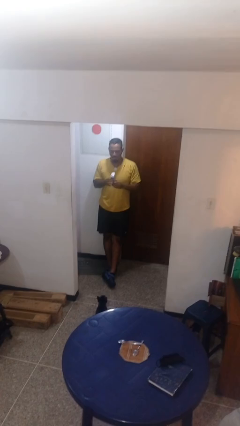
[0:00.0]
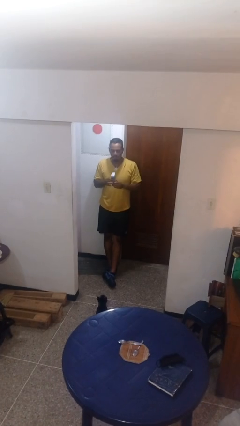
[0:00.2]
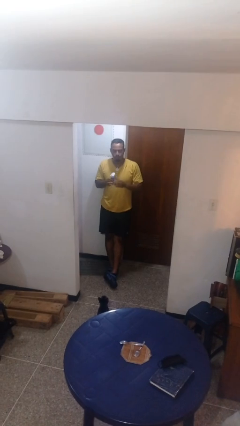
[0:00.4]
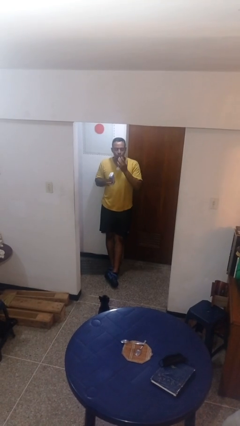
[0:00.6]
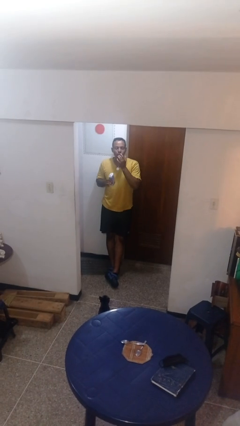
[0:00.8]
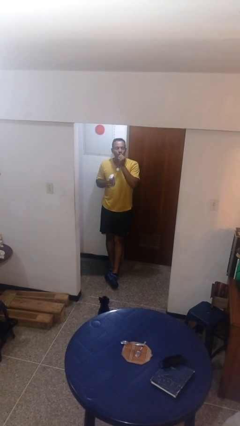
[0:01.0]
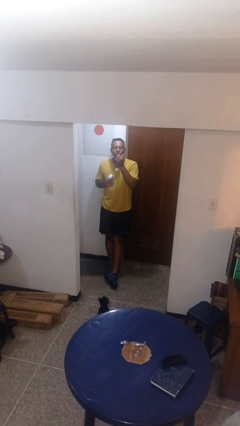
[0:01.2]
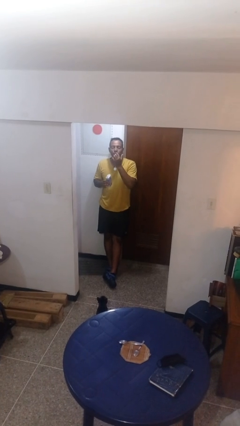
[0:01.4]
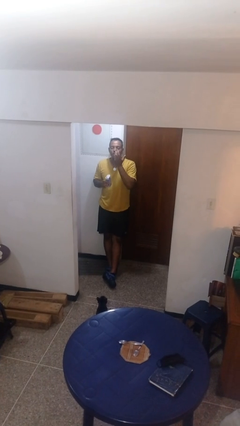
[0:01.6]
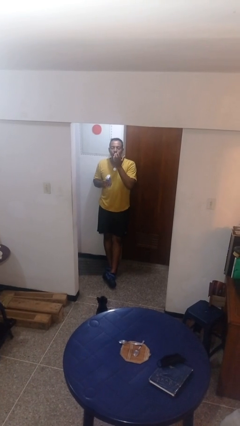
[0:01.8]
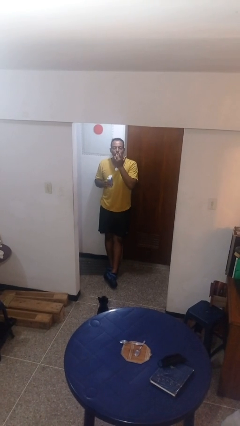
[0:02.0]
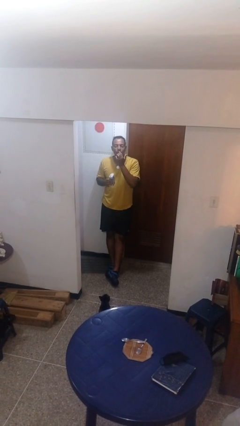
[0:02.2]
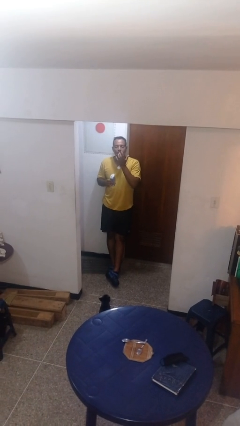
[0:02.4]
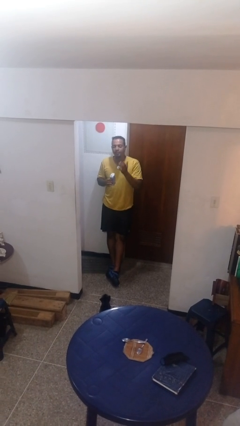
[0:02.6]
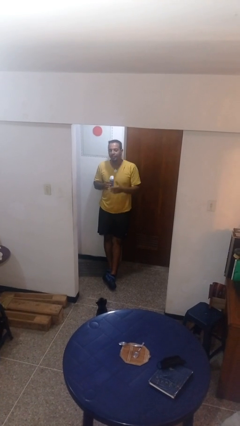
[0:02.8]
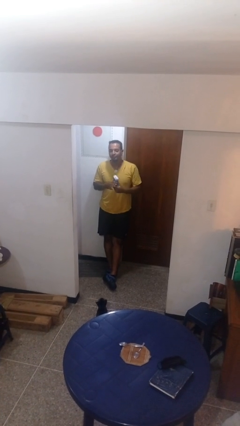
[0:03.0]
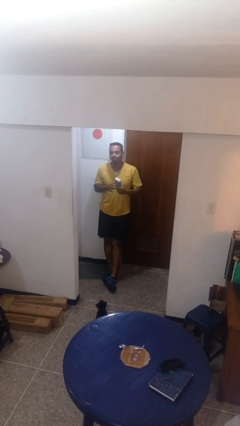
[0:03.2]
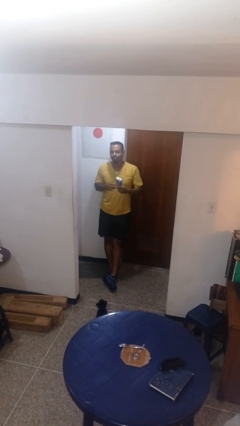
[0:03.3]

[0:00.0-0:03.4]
person licks fingers

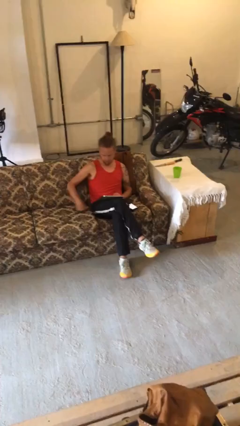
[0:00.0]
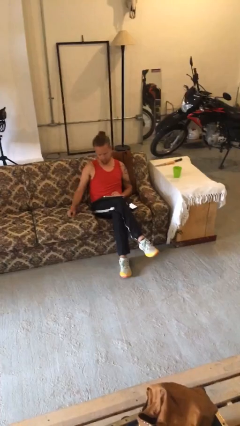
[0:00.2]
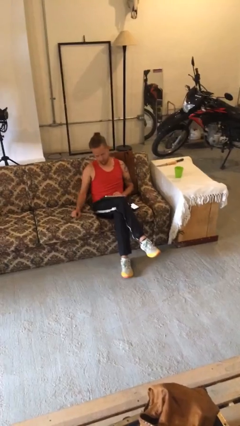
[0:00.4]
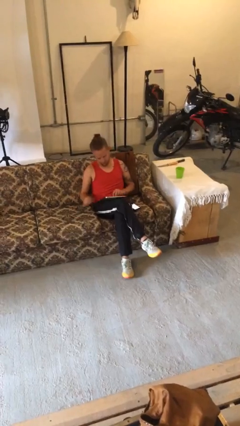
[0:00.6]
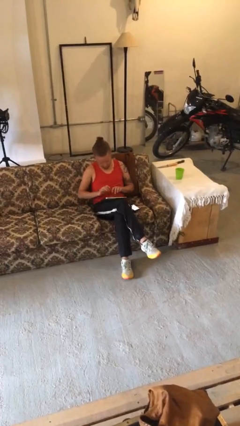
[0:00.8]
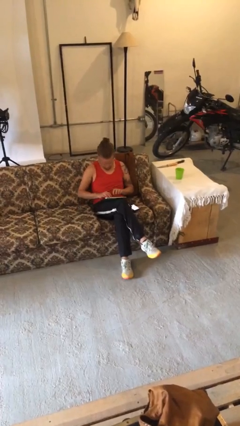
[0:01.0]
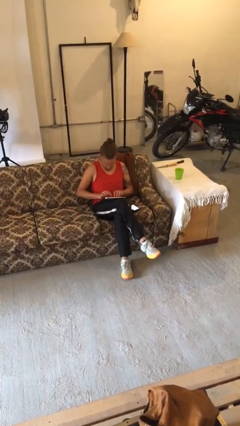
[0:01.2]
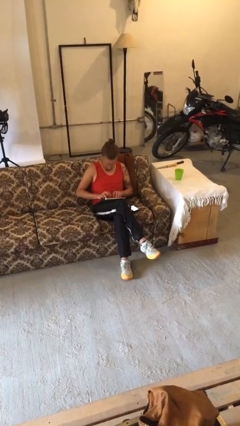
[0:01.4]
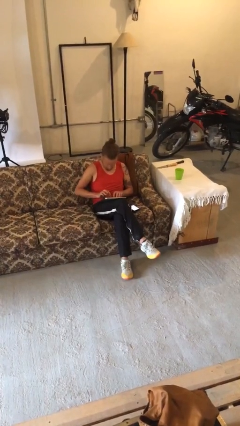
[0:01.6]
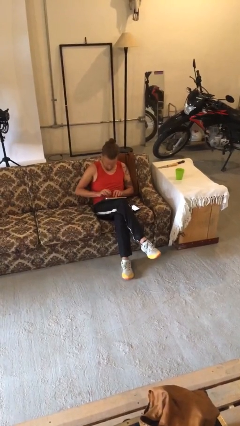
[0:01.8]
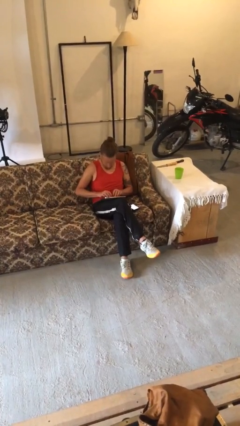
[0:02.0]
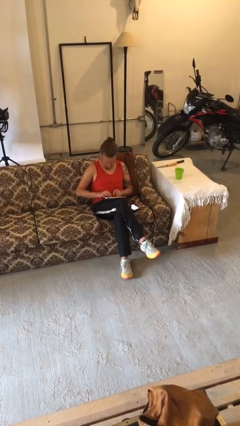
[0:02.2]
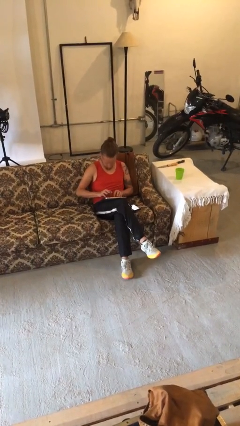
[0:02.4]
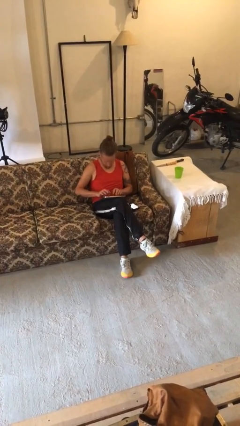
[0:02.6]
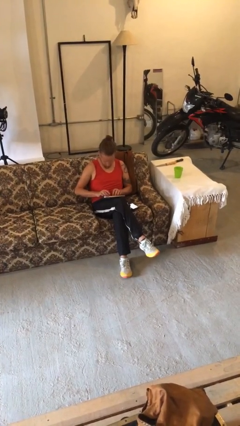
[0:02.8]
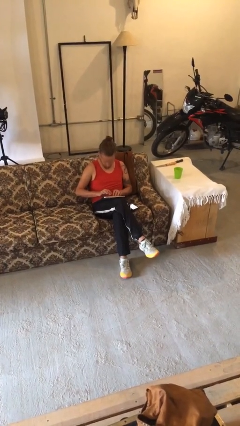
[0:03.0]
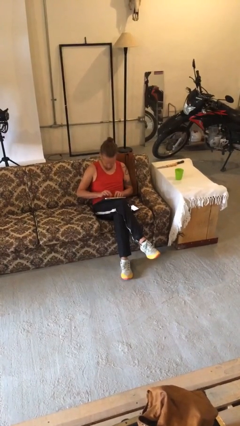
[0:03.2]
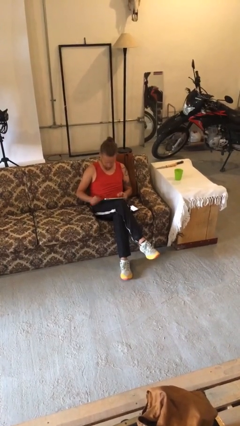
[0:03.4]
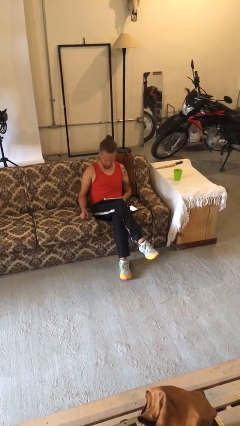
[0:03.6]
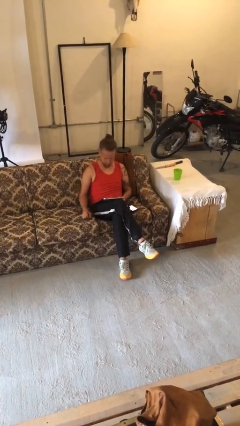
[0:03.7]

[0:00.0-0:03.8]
person interacts with tablet

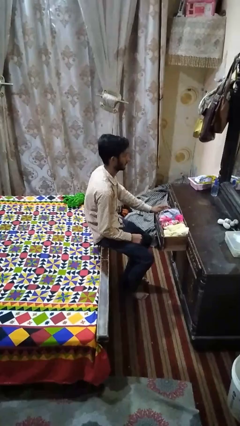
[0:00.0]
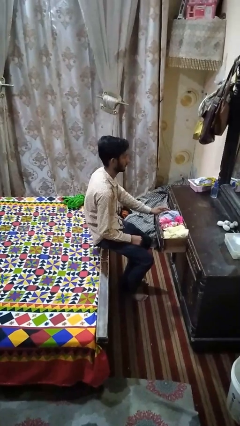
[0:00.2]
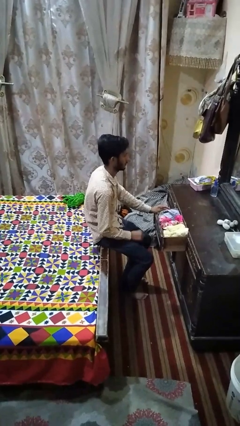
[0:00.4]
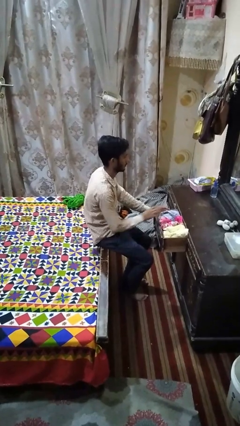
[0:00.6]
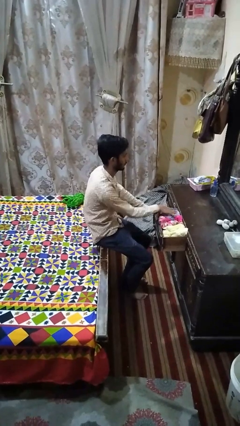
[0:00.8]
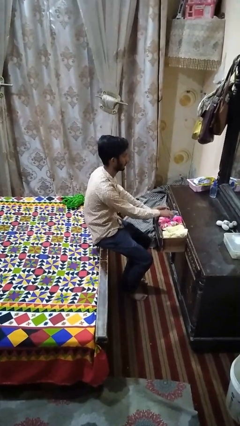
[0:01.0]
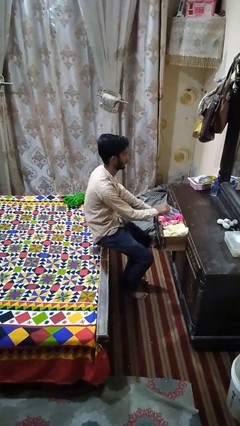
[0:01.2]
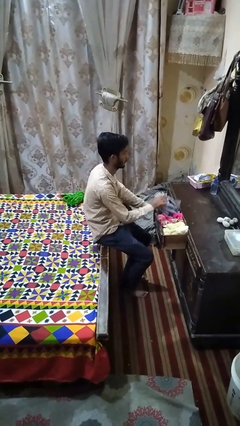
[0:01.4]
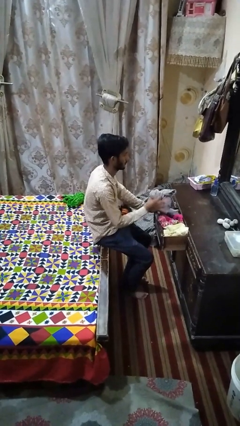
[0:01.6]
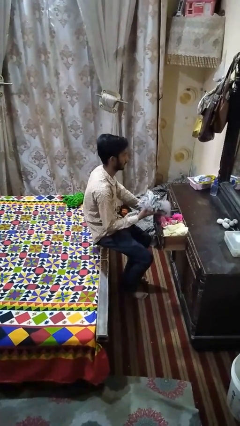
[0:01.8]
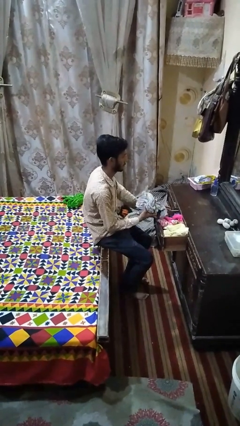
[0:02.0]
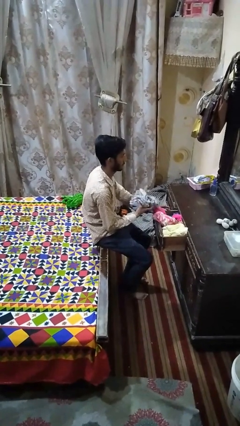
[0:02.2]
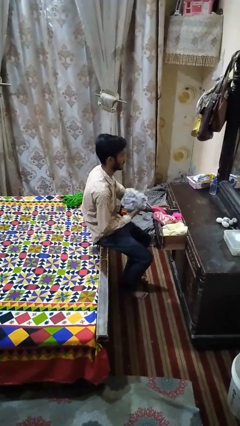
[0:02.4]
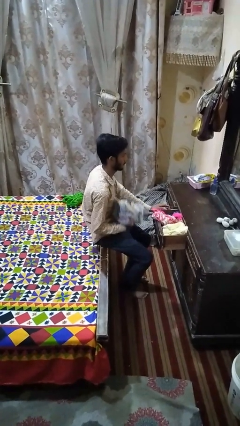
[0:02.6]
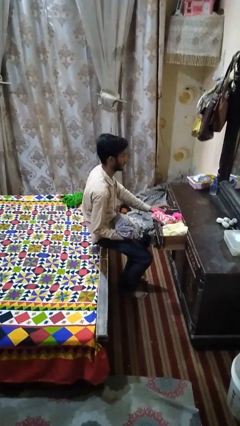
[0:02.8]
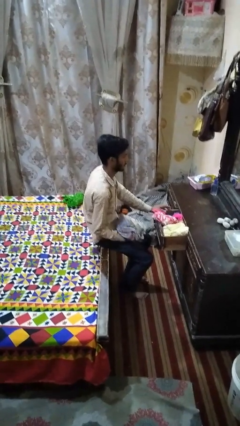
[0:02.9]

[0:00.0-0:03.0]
person takes clothes from dresser

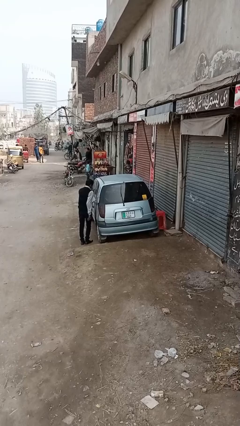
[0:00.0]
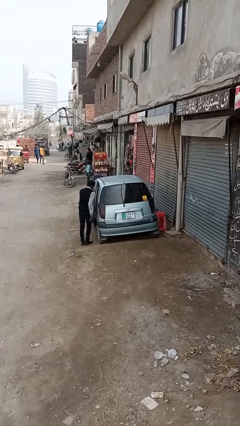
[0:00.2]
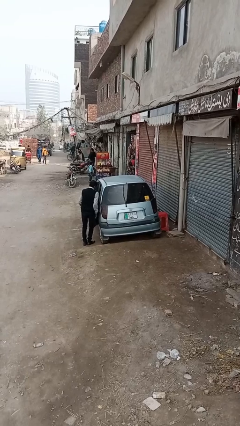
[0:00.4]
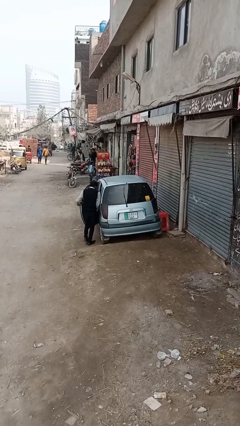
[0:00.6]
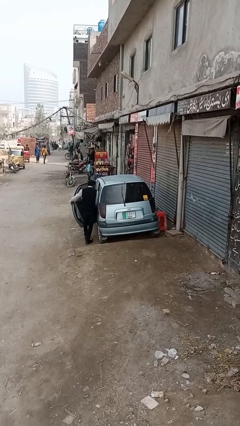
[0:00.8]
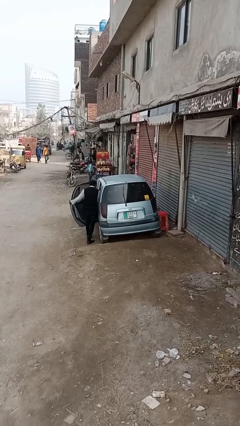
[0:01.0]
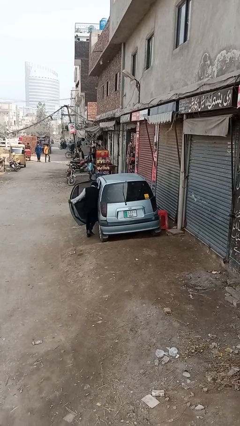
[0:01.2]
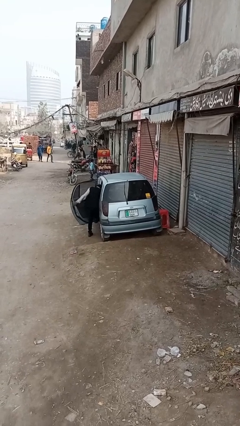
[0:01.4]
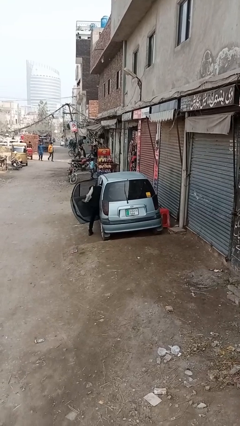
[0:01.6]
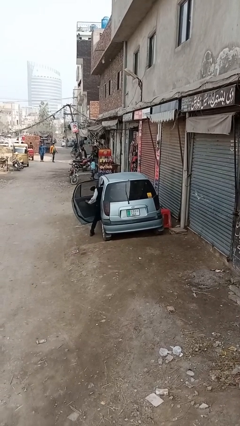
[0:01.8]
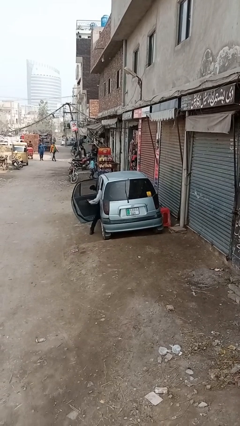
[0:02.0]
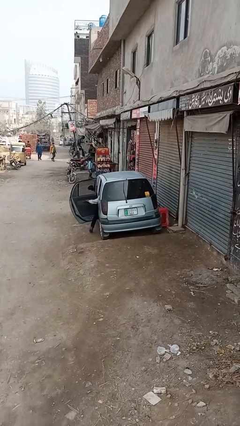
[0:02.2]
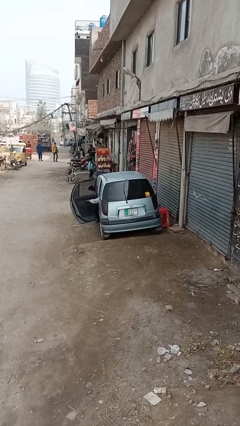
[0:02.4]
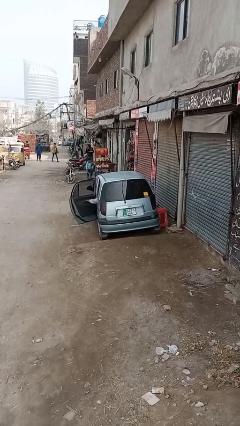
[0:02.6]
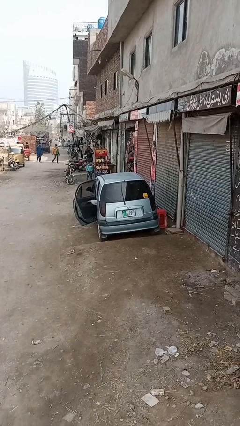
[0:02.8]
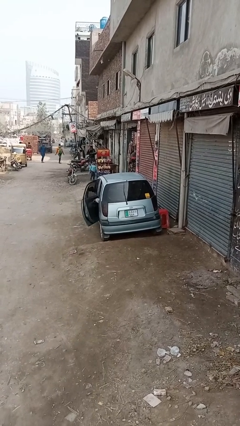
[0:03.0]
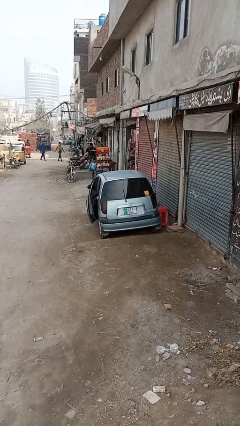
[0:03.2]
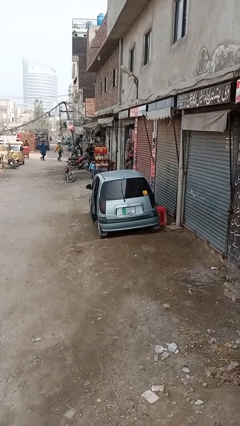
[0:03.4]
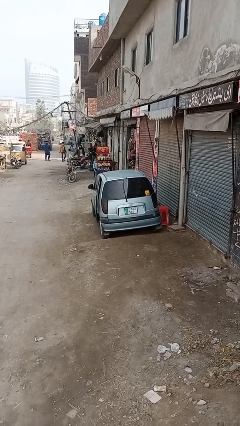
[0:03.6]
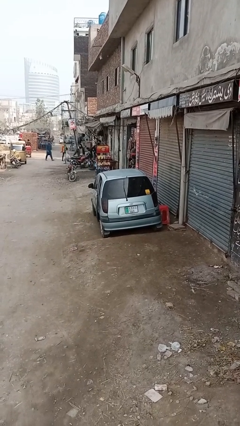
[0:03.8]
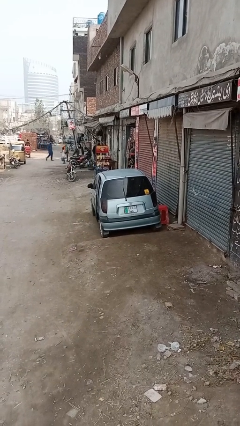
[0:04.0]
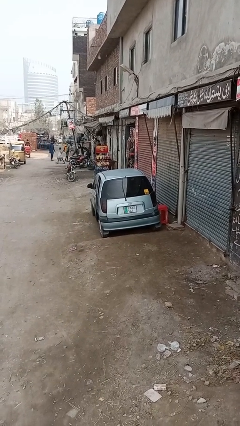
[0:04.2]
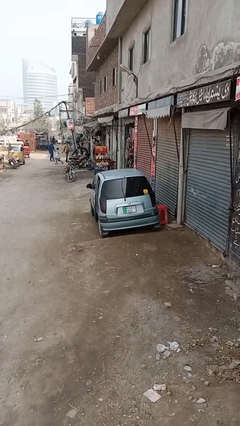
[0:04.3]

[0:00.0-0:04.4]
car picks up person

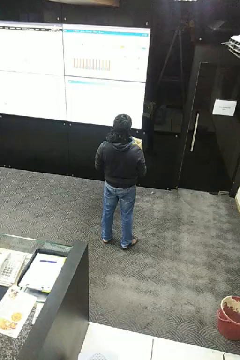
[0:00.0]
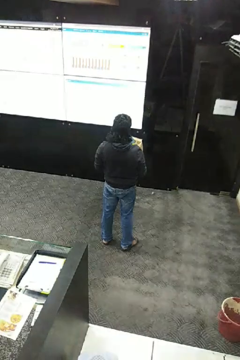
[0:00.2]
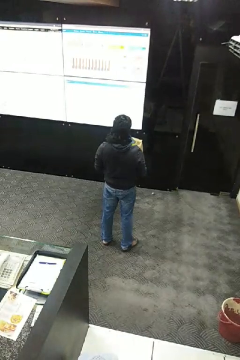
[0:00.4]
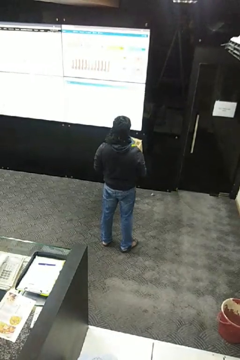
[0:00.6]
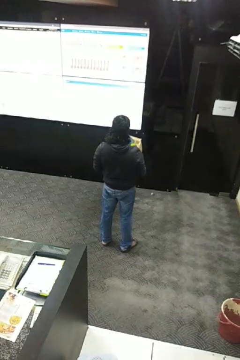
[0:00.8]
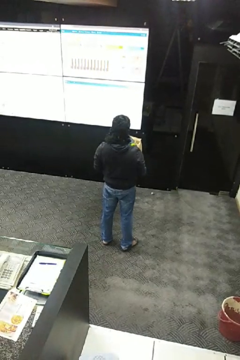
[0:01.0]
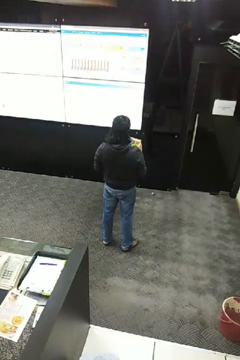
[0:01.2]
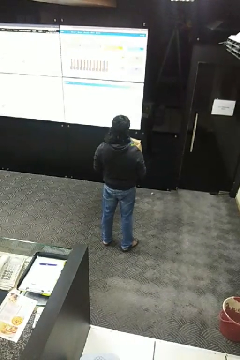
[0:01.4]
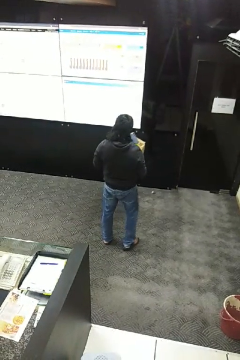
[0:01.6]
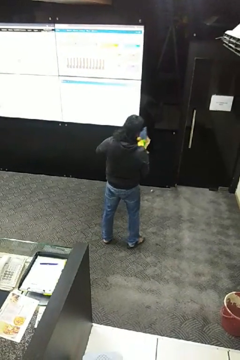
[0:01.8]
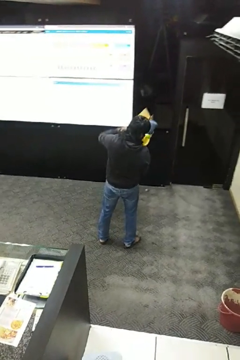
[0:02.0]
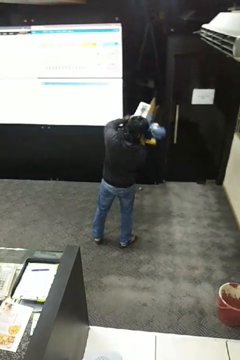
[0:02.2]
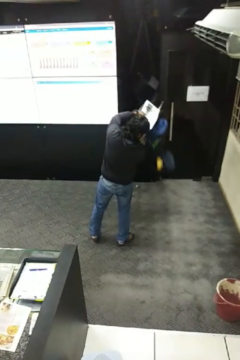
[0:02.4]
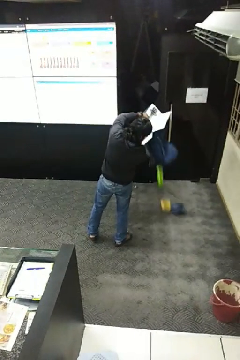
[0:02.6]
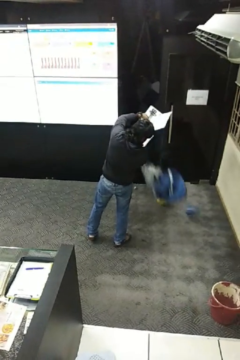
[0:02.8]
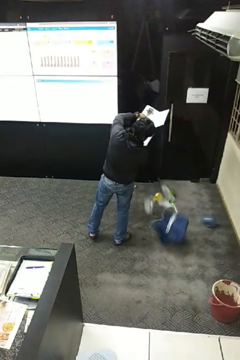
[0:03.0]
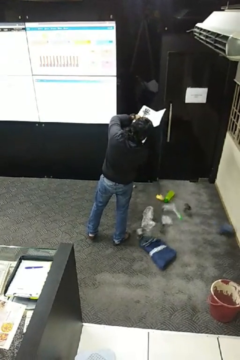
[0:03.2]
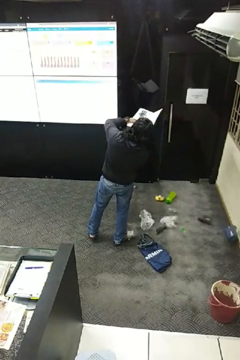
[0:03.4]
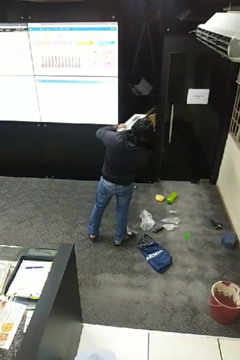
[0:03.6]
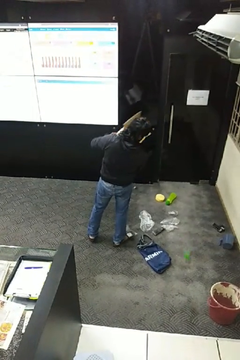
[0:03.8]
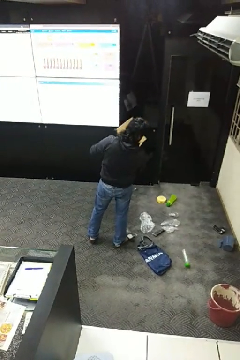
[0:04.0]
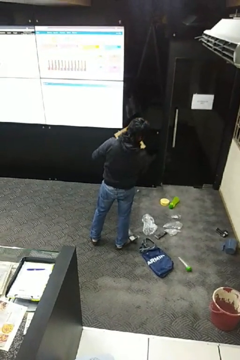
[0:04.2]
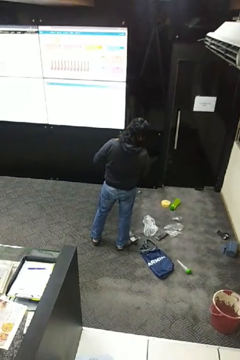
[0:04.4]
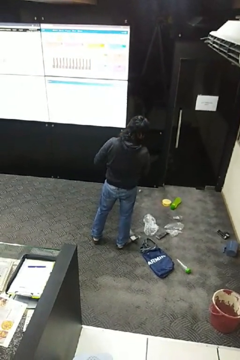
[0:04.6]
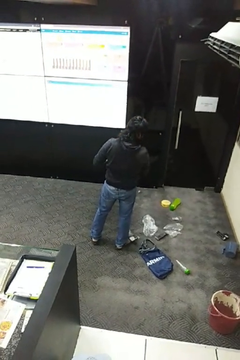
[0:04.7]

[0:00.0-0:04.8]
person unloads box onto floor
